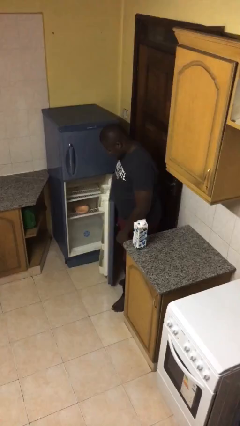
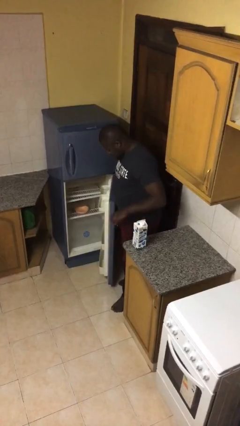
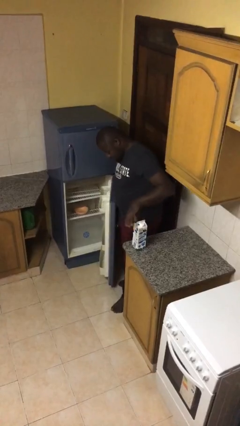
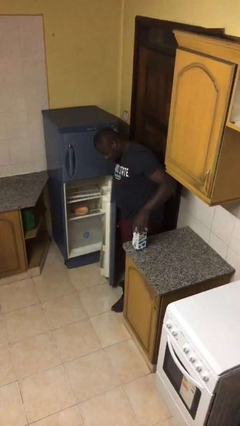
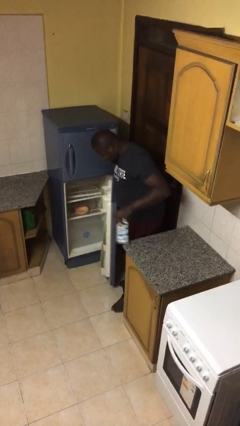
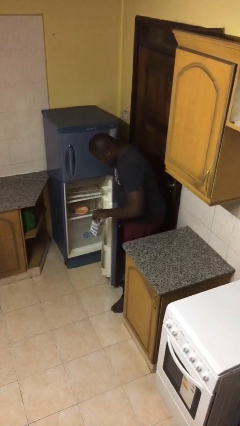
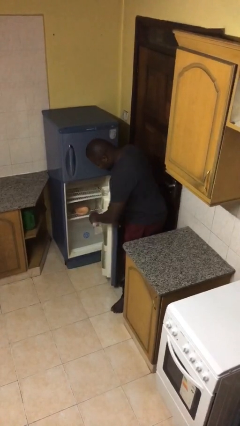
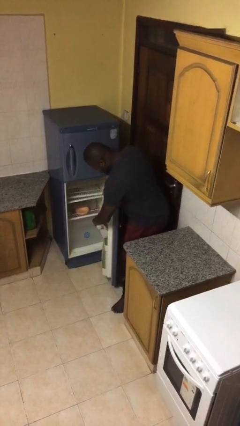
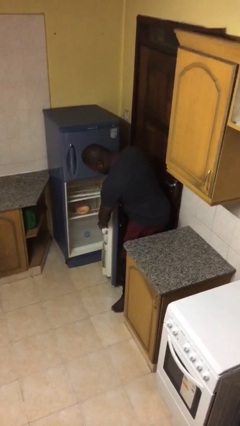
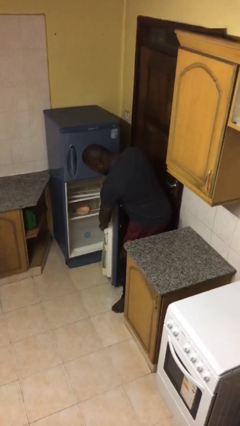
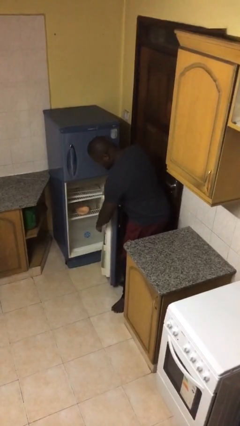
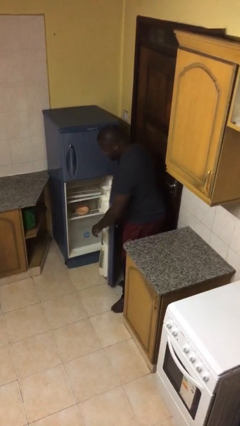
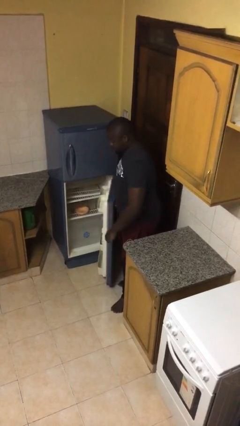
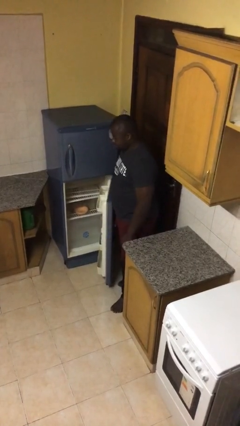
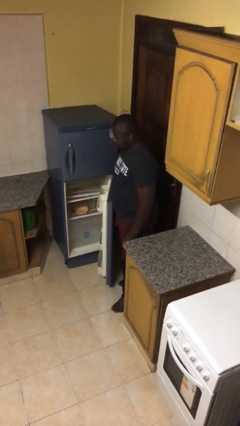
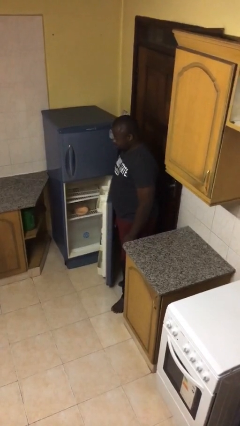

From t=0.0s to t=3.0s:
person puts object into refrigerator

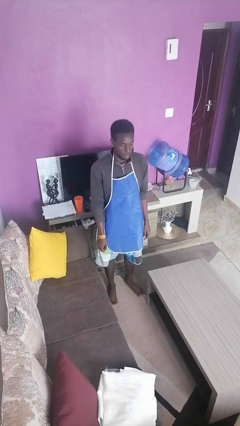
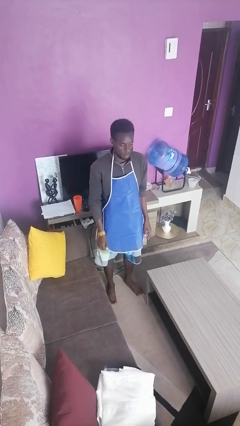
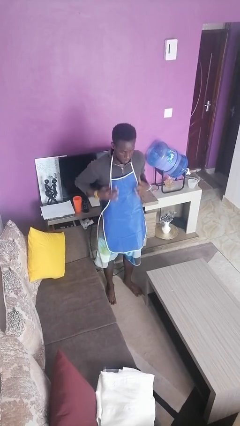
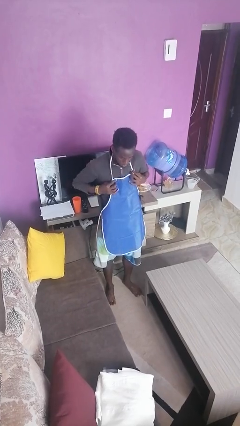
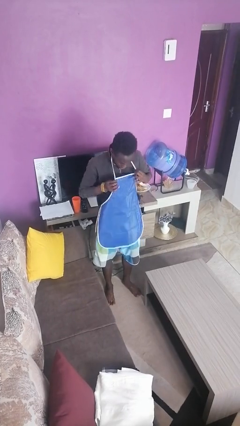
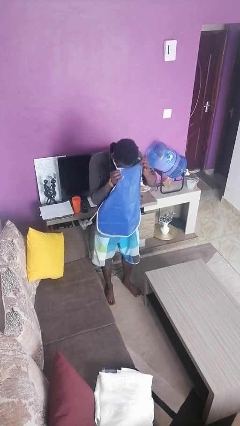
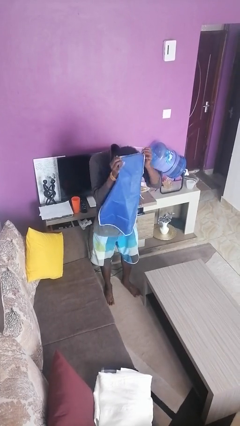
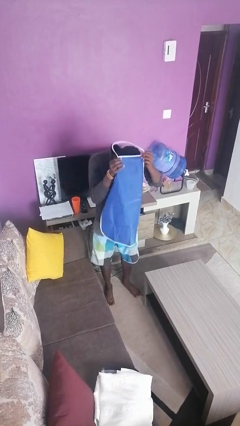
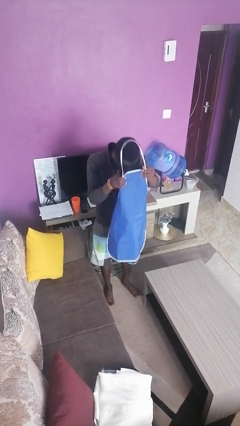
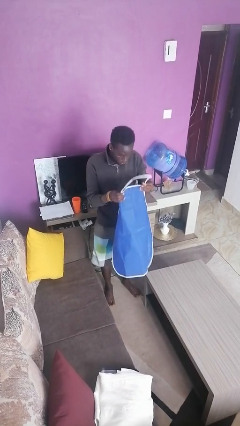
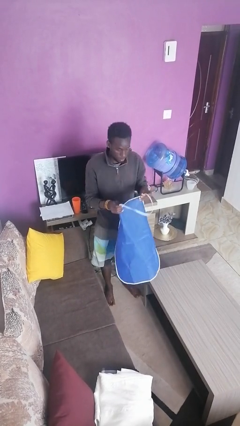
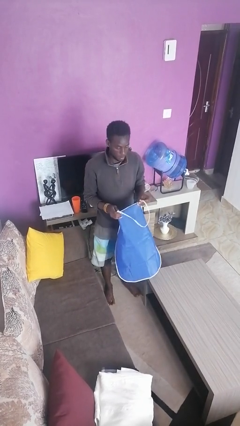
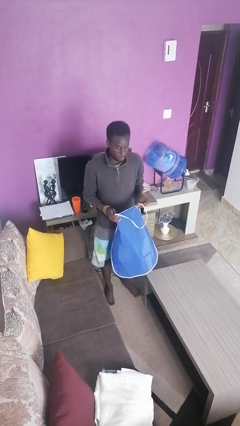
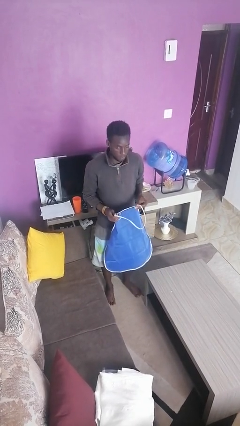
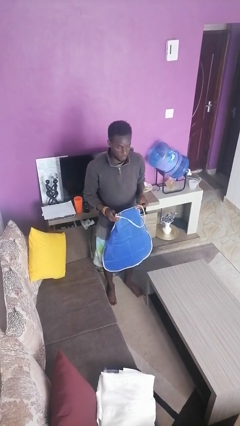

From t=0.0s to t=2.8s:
person takes off apron

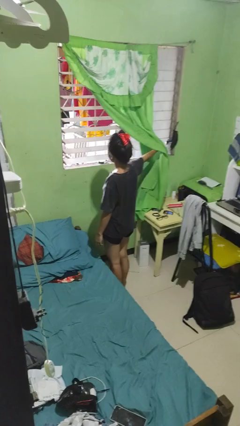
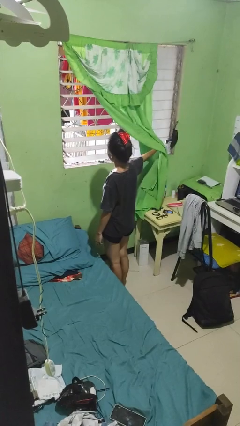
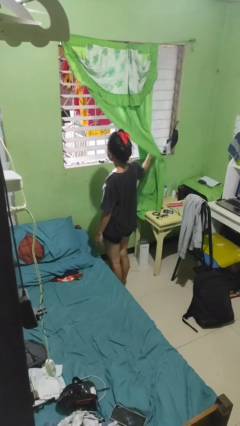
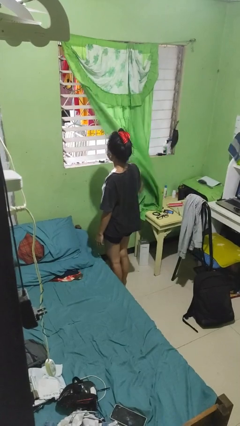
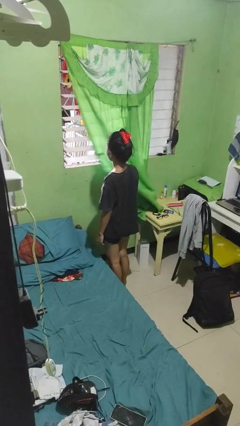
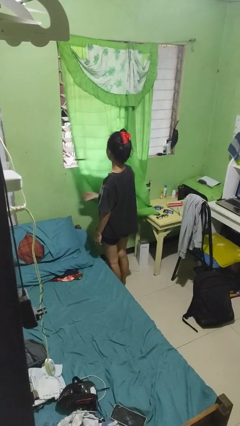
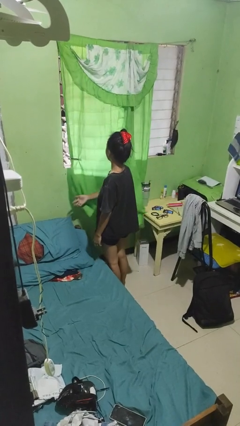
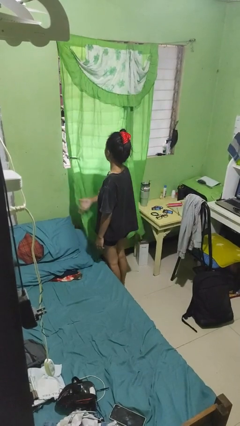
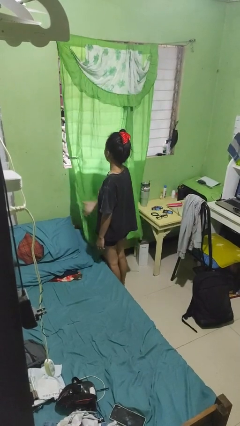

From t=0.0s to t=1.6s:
person closes curtains

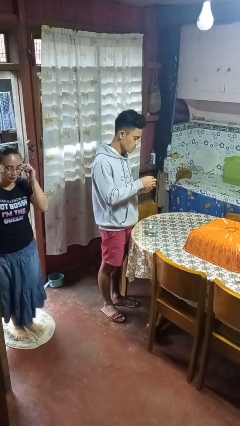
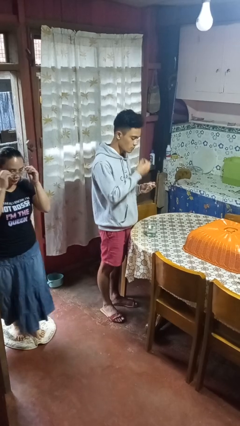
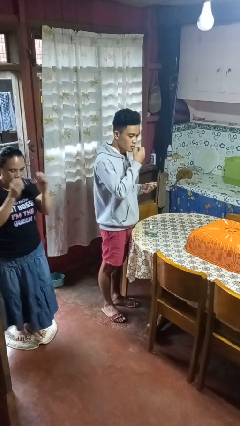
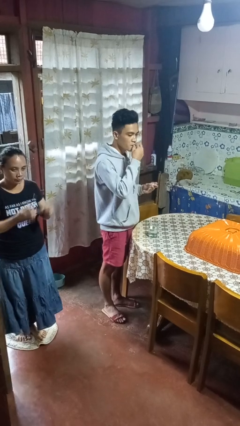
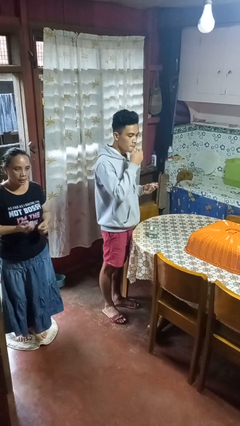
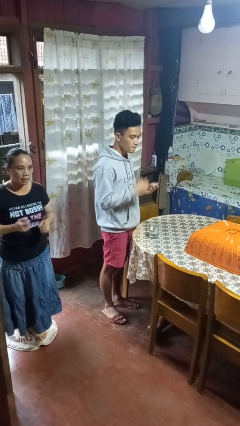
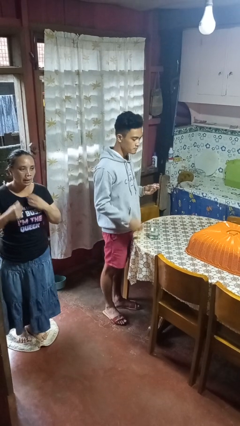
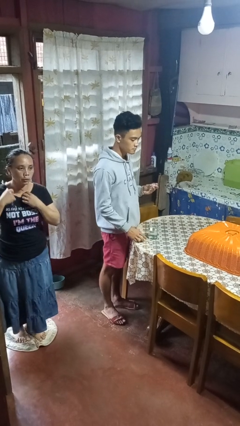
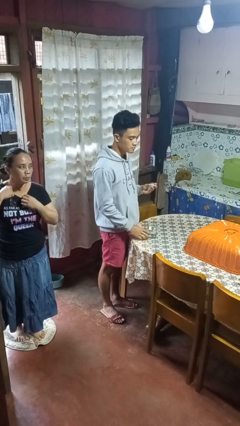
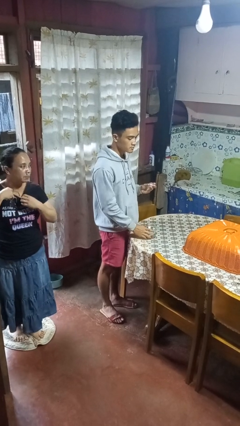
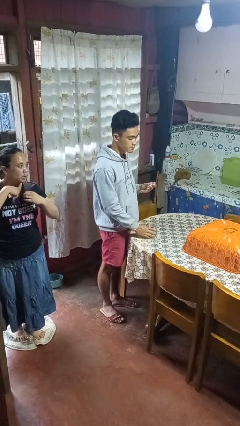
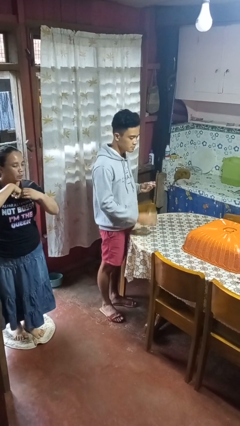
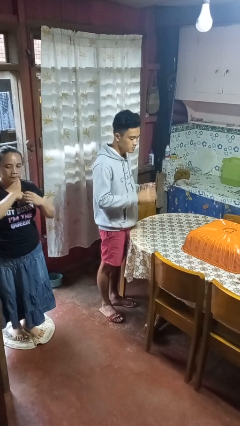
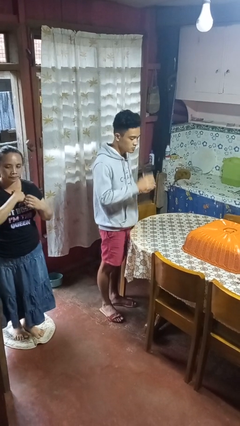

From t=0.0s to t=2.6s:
person takes medicine pills

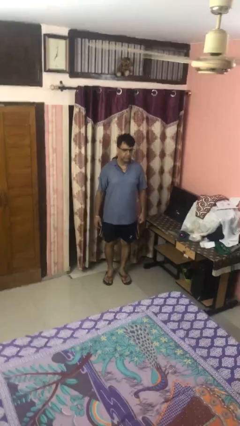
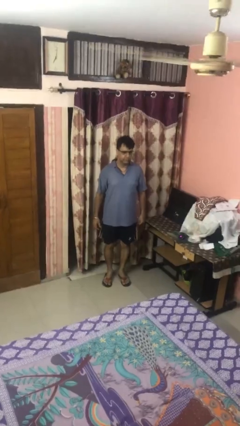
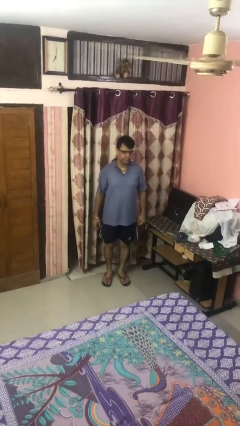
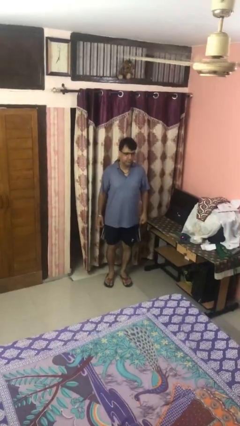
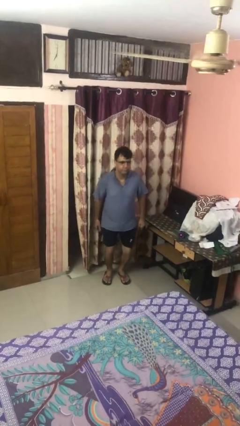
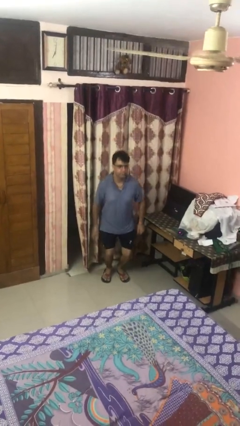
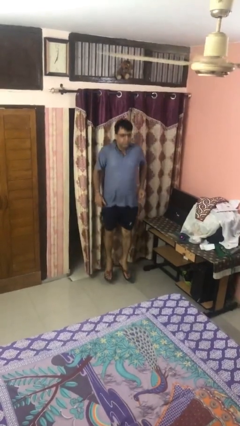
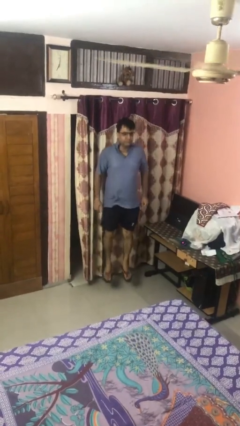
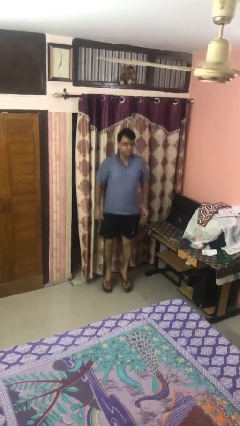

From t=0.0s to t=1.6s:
person jumps

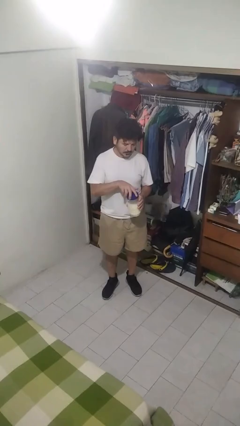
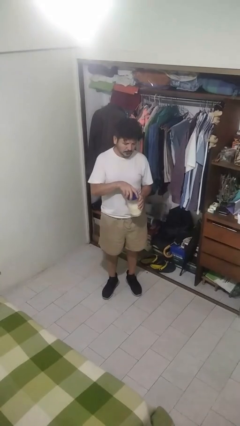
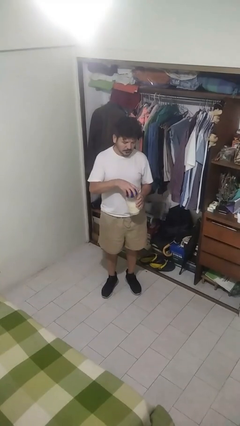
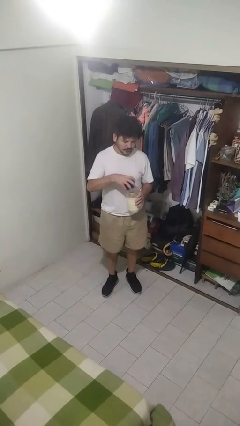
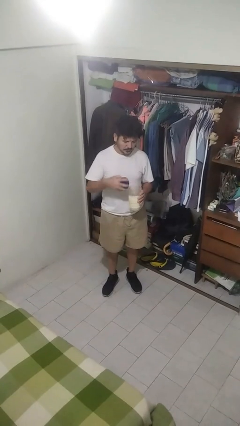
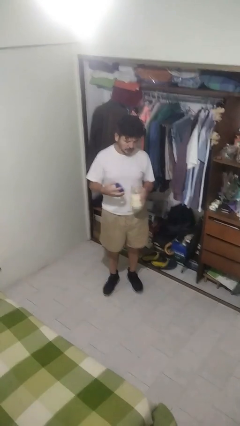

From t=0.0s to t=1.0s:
person opens jar

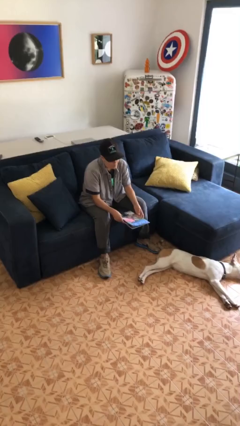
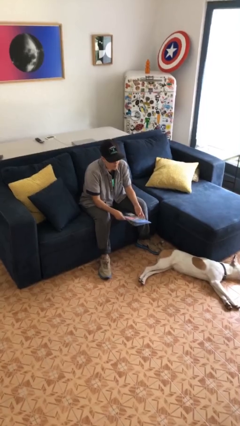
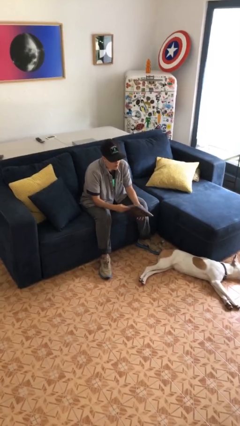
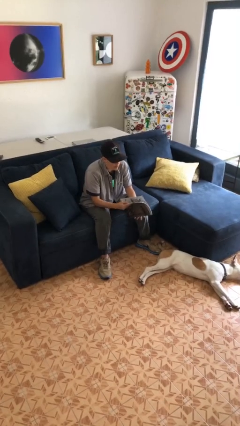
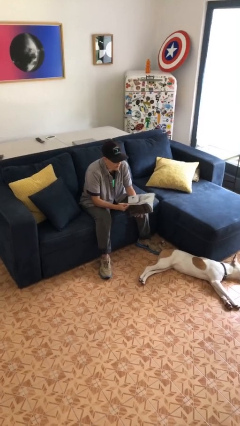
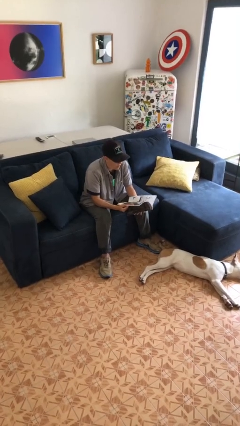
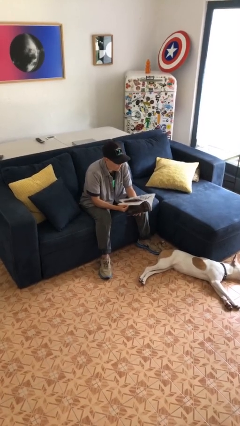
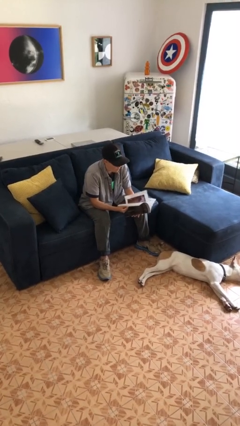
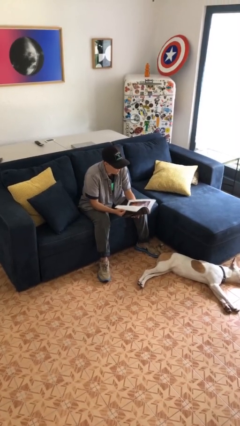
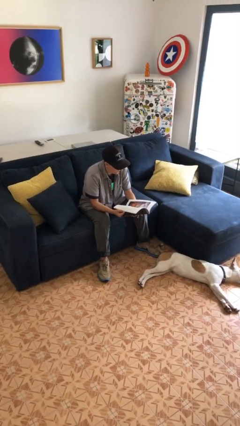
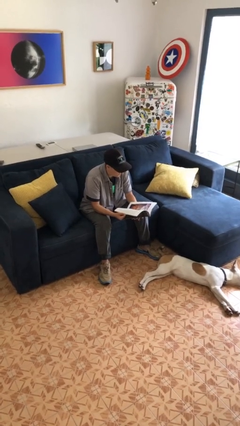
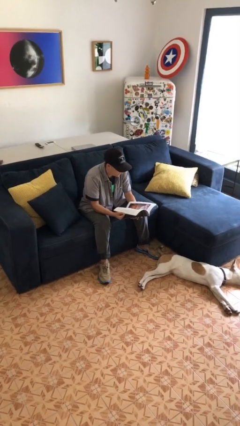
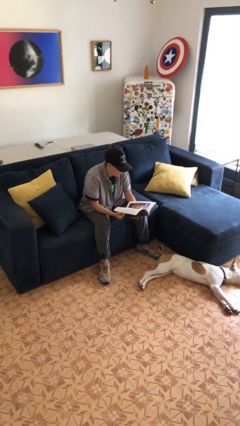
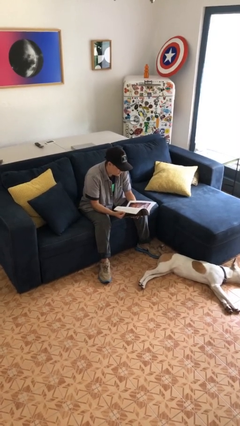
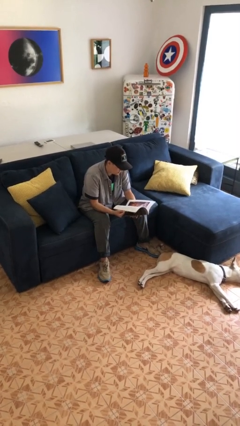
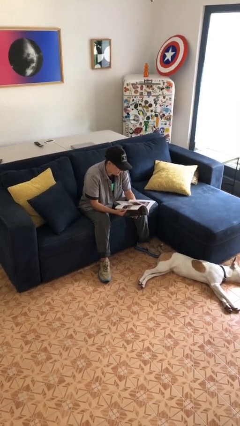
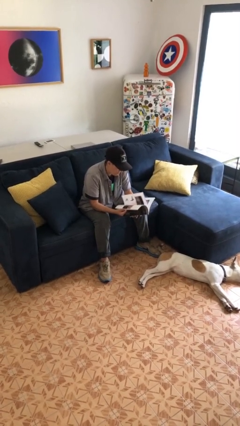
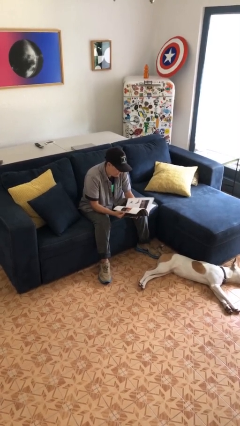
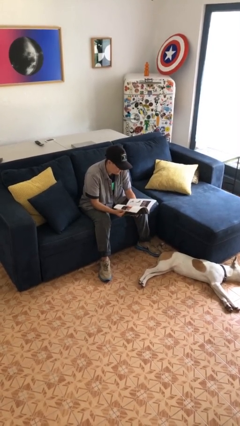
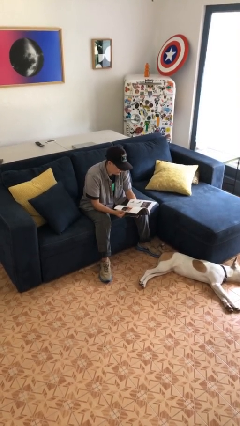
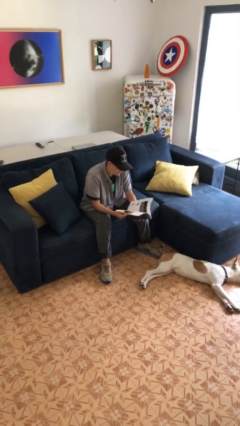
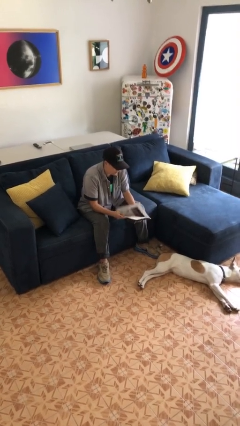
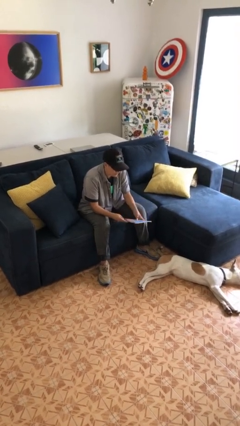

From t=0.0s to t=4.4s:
person reads magazine

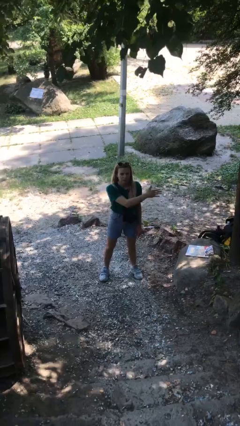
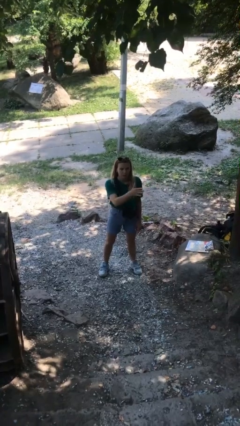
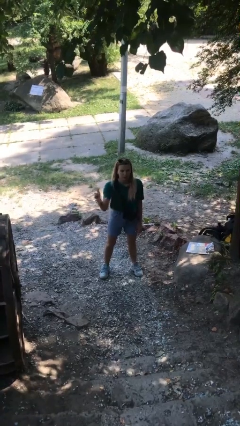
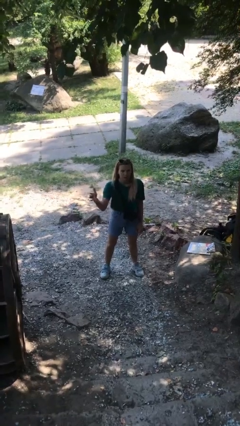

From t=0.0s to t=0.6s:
person gestures swipe right
